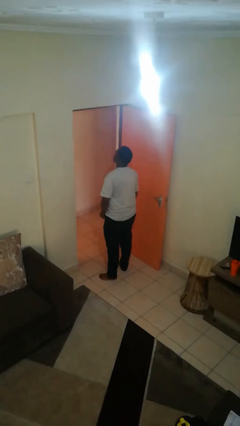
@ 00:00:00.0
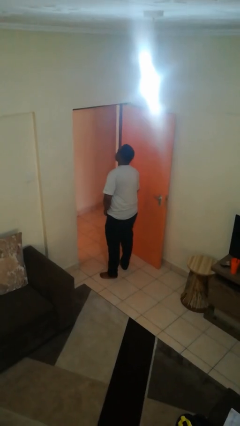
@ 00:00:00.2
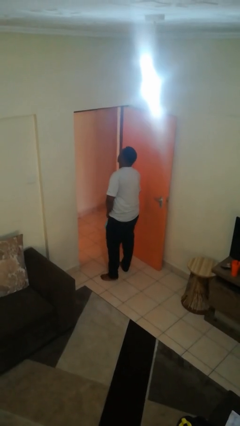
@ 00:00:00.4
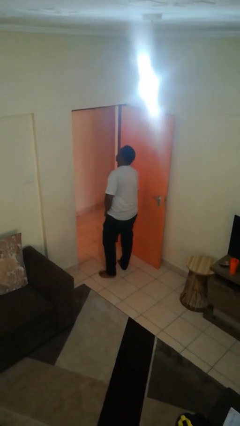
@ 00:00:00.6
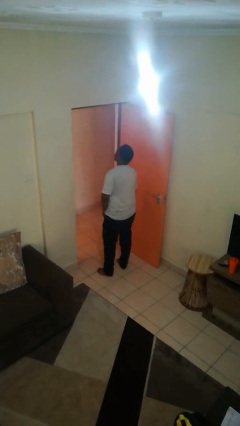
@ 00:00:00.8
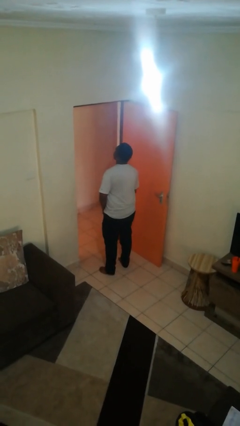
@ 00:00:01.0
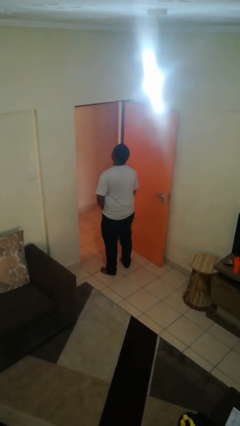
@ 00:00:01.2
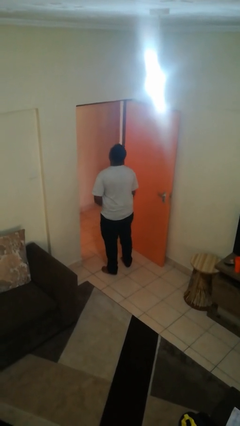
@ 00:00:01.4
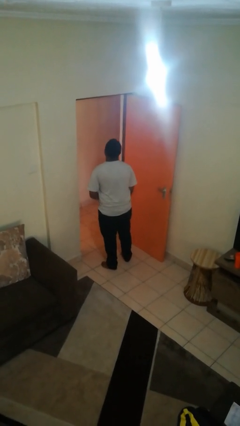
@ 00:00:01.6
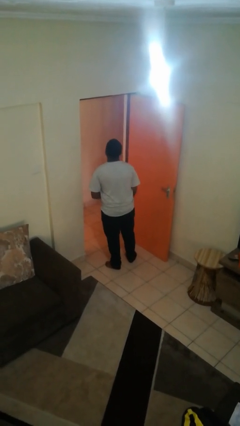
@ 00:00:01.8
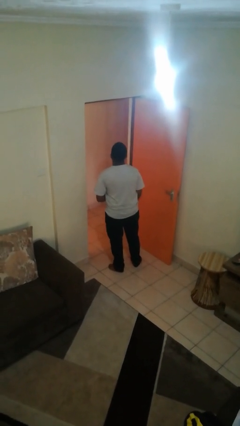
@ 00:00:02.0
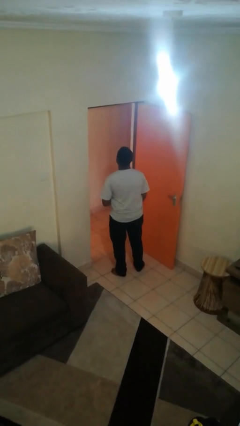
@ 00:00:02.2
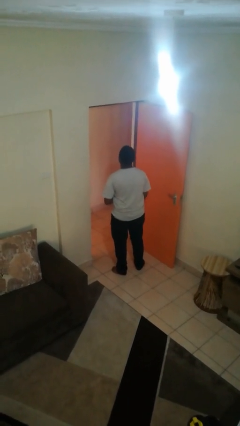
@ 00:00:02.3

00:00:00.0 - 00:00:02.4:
person takes off facemask

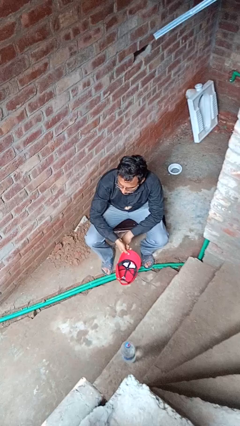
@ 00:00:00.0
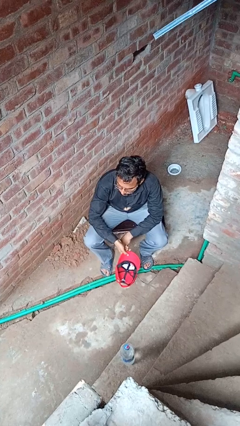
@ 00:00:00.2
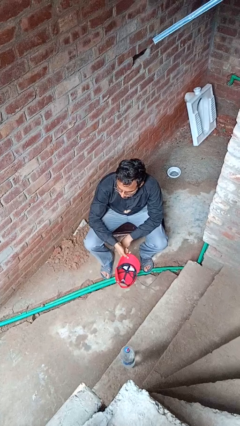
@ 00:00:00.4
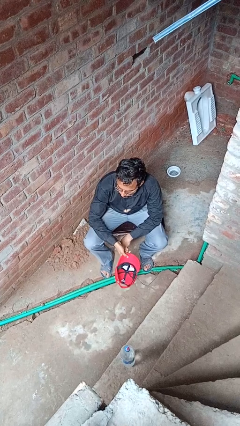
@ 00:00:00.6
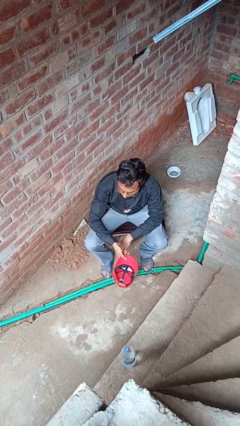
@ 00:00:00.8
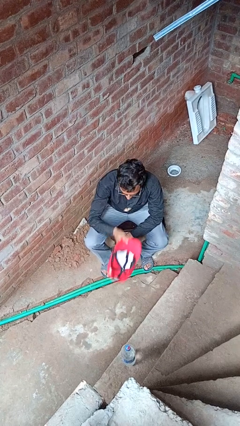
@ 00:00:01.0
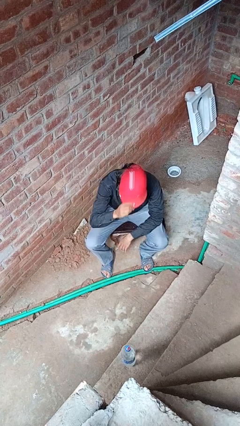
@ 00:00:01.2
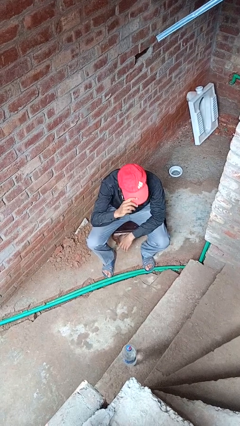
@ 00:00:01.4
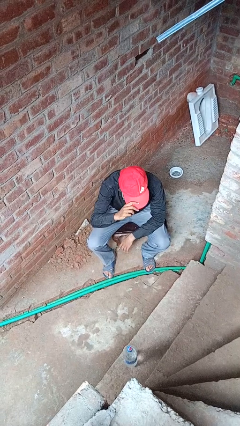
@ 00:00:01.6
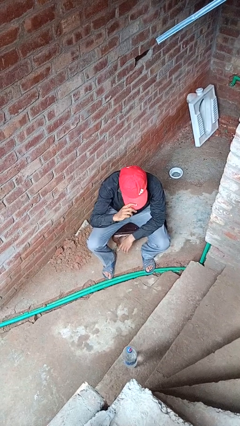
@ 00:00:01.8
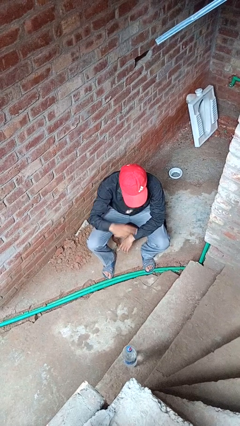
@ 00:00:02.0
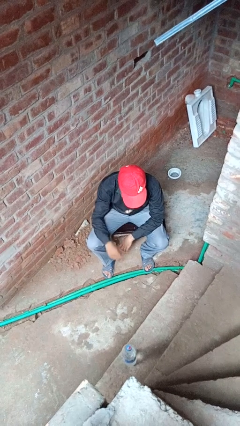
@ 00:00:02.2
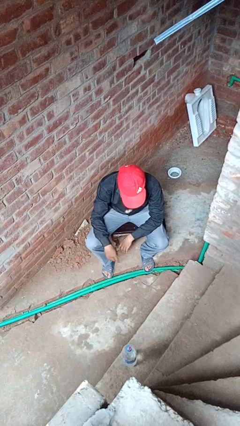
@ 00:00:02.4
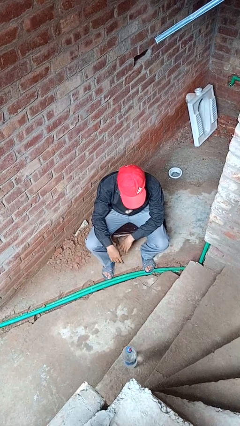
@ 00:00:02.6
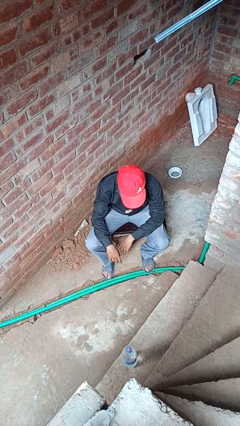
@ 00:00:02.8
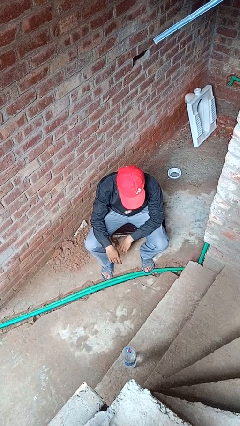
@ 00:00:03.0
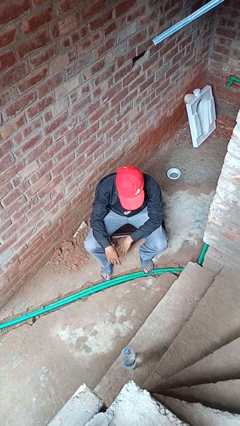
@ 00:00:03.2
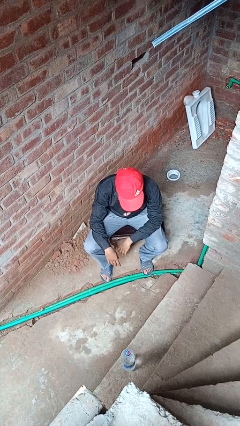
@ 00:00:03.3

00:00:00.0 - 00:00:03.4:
person puts on hat

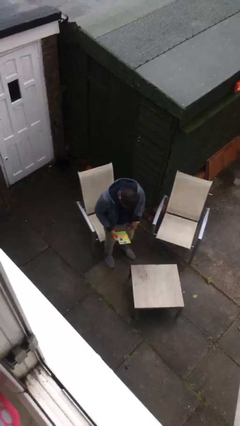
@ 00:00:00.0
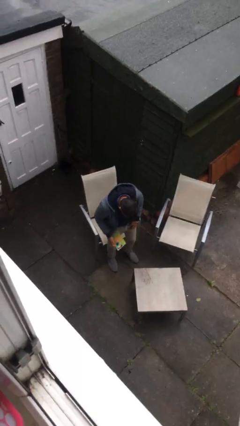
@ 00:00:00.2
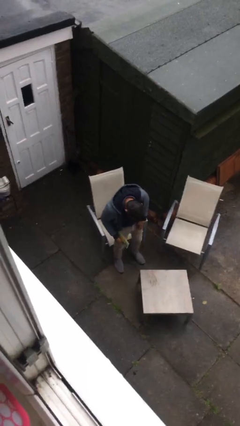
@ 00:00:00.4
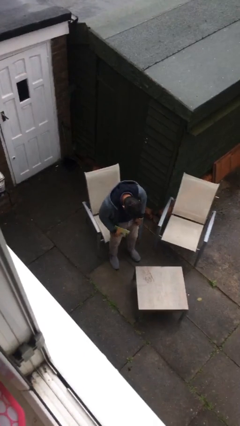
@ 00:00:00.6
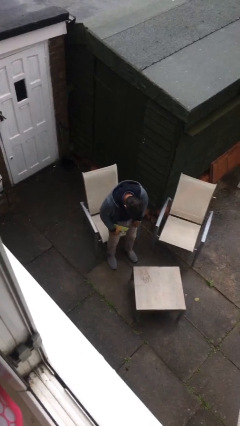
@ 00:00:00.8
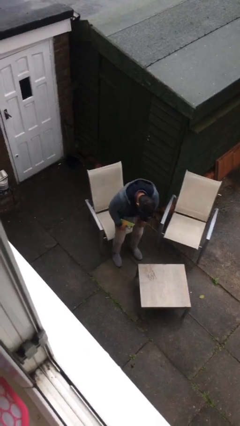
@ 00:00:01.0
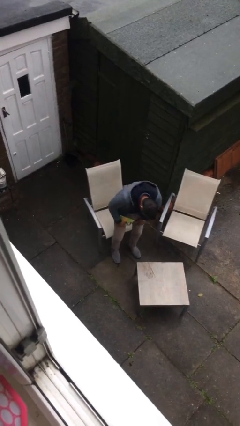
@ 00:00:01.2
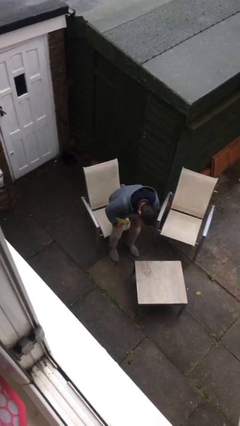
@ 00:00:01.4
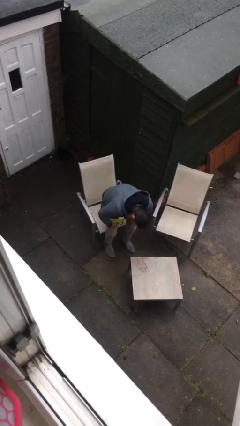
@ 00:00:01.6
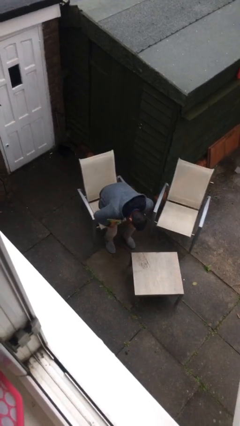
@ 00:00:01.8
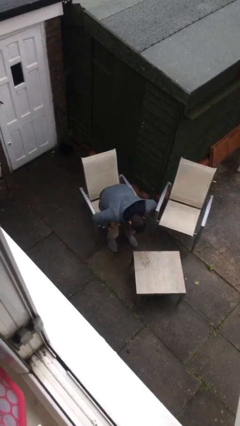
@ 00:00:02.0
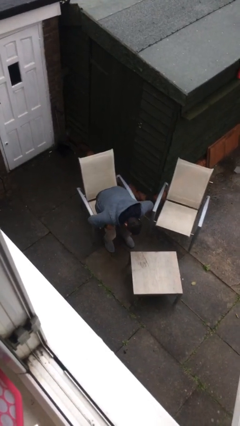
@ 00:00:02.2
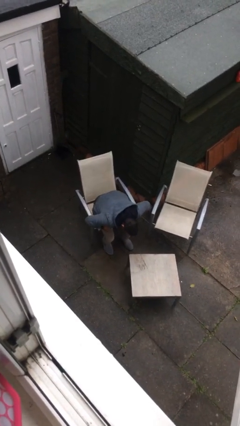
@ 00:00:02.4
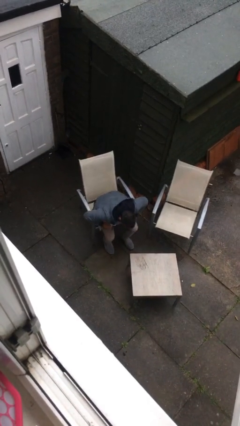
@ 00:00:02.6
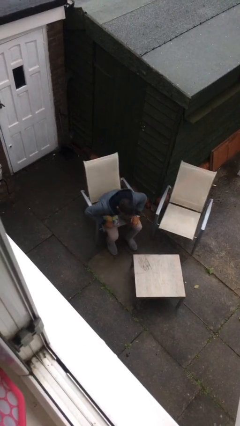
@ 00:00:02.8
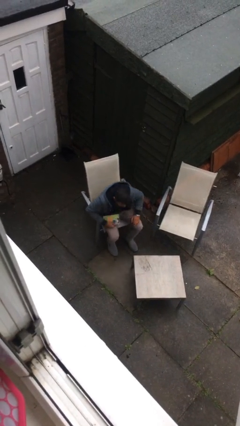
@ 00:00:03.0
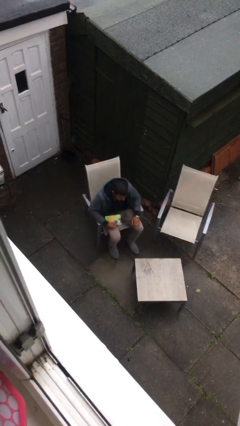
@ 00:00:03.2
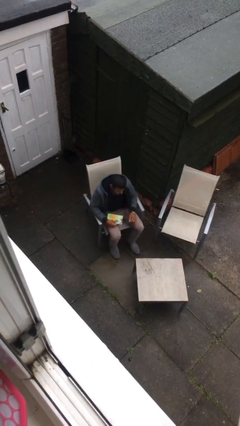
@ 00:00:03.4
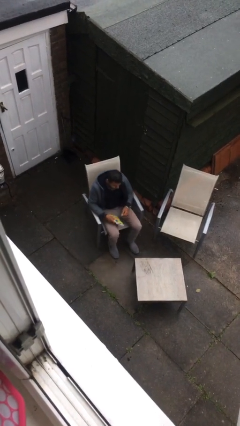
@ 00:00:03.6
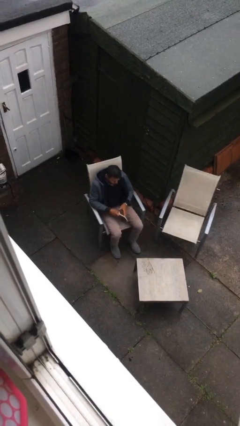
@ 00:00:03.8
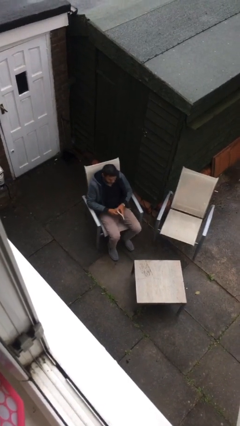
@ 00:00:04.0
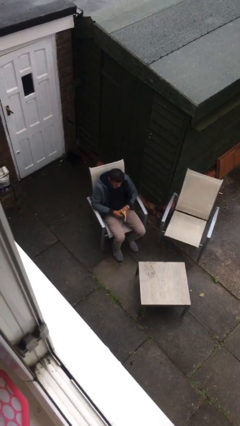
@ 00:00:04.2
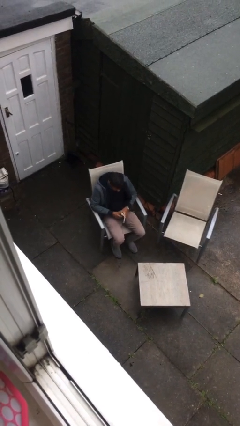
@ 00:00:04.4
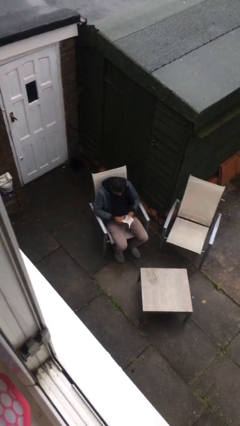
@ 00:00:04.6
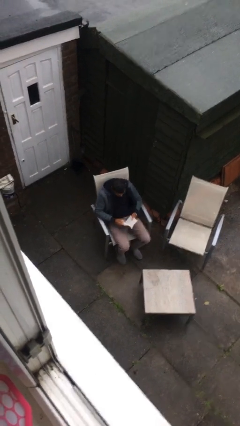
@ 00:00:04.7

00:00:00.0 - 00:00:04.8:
person sits down

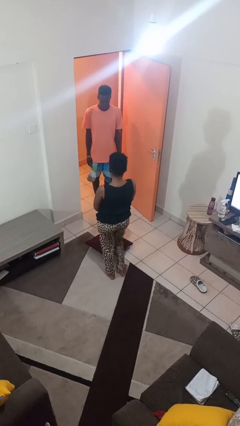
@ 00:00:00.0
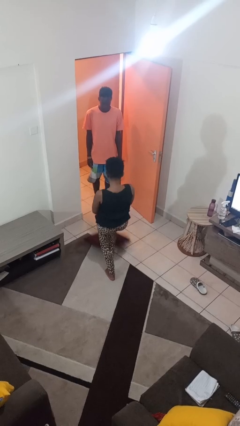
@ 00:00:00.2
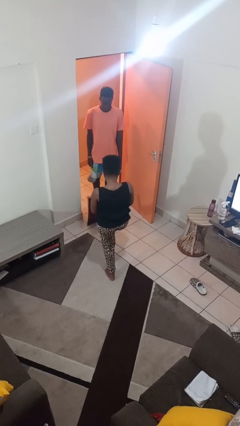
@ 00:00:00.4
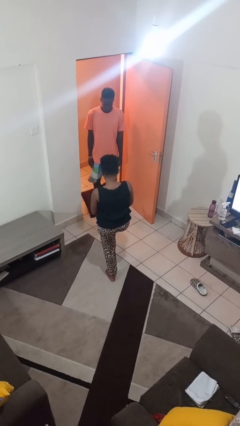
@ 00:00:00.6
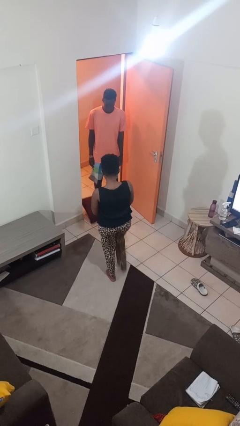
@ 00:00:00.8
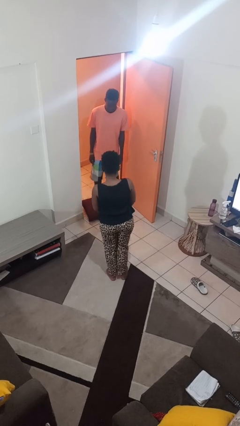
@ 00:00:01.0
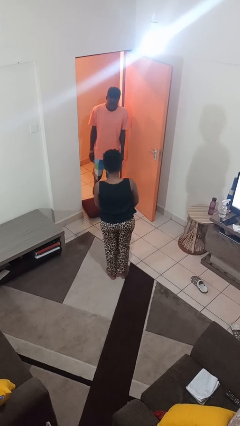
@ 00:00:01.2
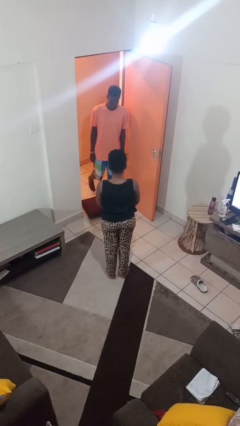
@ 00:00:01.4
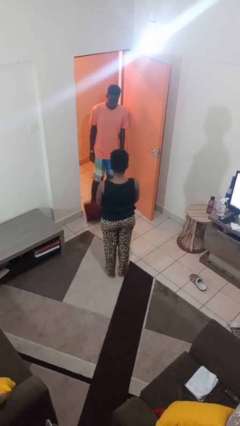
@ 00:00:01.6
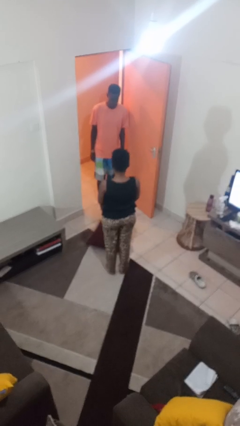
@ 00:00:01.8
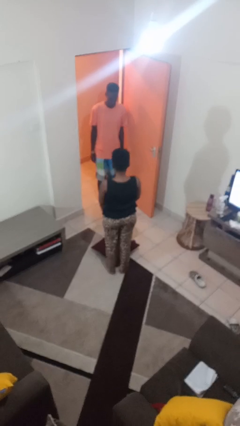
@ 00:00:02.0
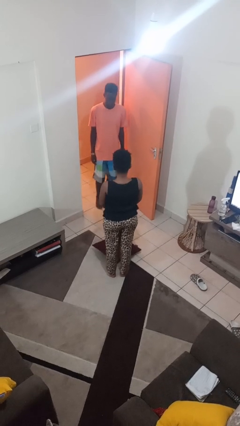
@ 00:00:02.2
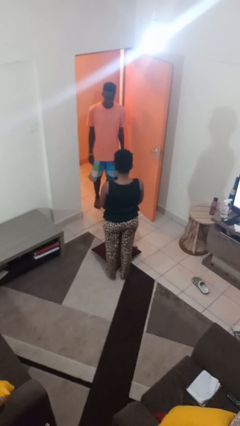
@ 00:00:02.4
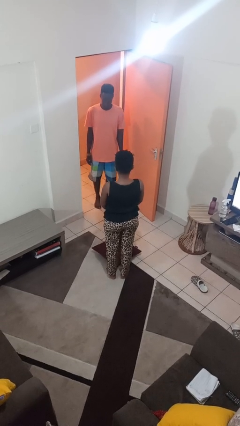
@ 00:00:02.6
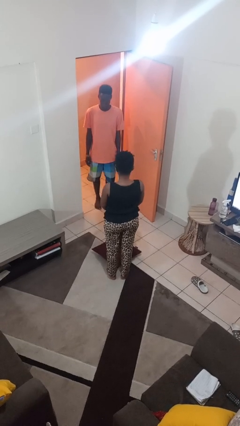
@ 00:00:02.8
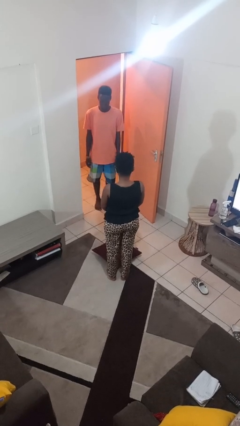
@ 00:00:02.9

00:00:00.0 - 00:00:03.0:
person kicks object to person

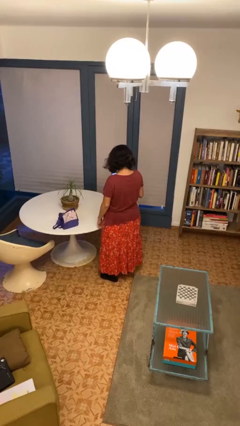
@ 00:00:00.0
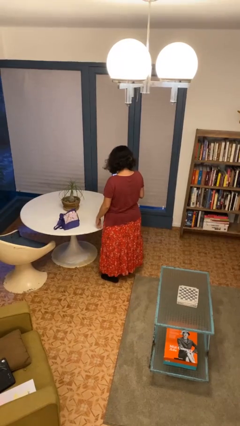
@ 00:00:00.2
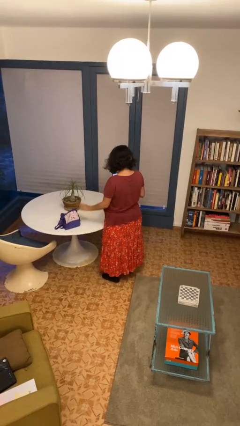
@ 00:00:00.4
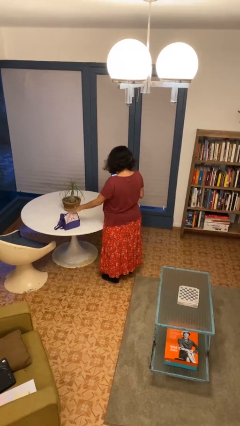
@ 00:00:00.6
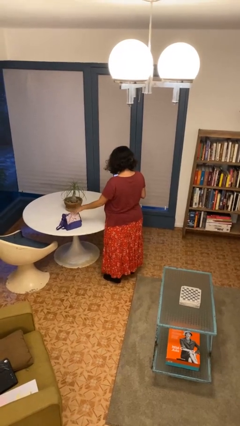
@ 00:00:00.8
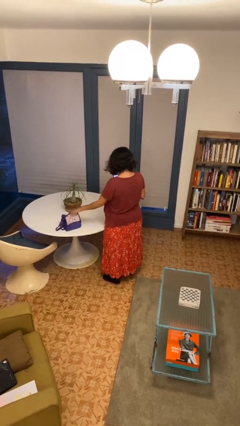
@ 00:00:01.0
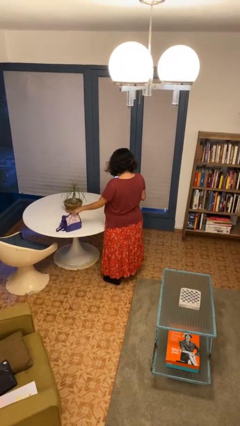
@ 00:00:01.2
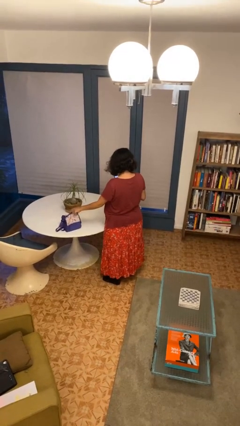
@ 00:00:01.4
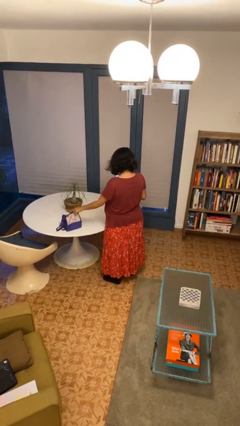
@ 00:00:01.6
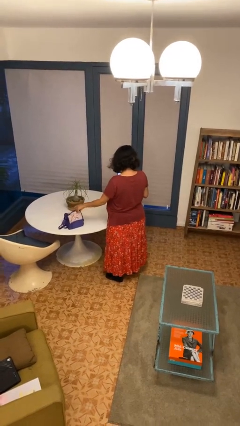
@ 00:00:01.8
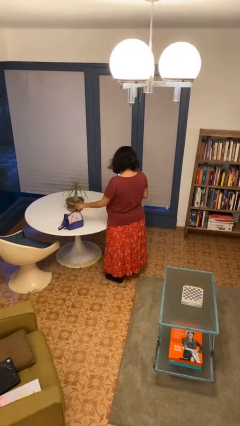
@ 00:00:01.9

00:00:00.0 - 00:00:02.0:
person taps object with finger

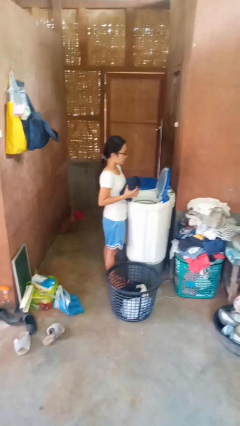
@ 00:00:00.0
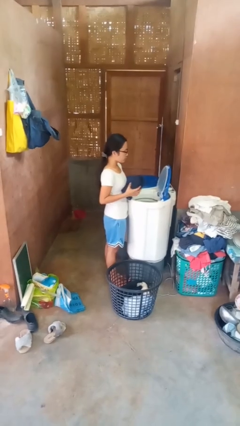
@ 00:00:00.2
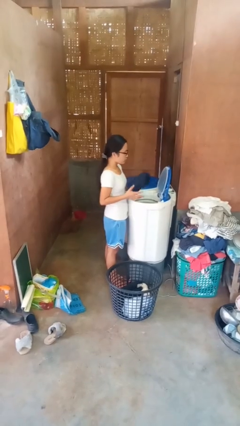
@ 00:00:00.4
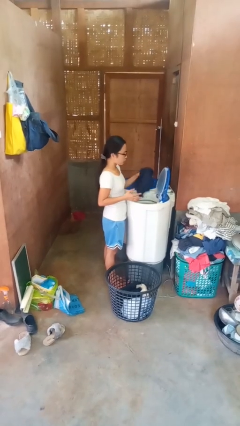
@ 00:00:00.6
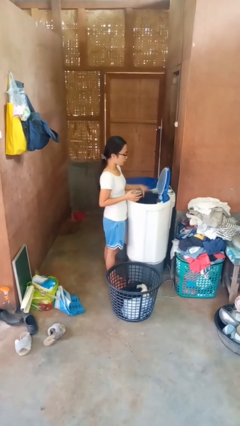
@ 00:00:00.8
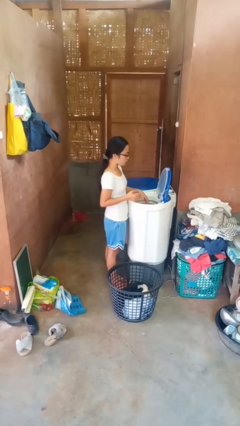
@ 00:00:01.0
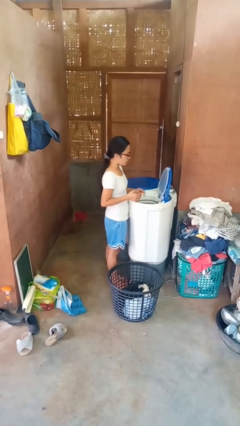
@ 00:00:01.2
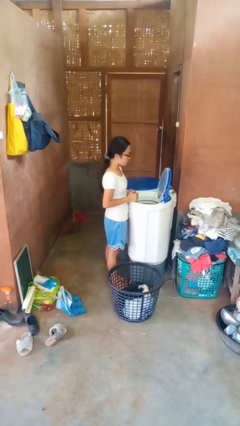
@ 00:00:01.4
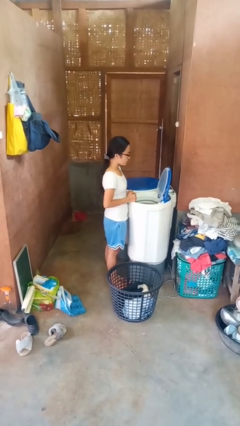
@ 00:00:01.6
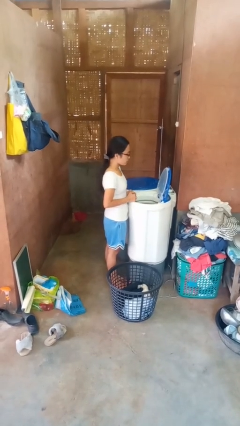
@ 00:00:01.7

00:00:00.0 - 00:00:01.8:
person loads dryer
